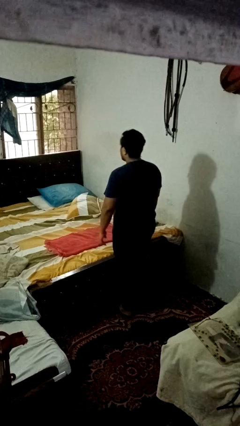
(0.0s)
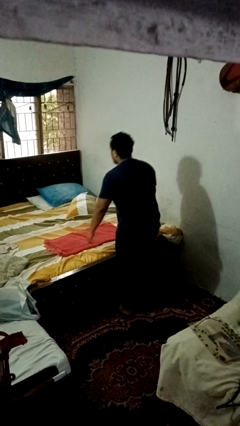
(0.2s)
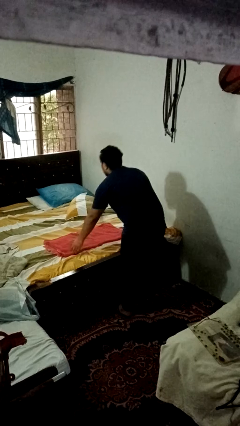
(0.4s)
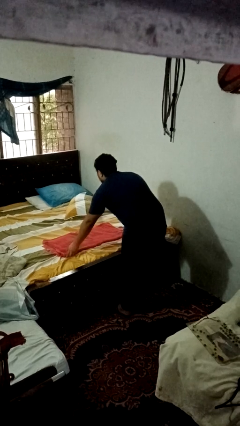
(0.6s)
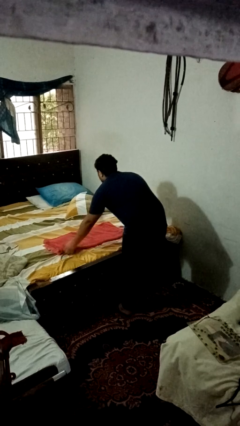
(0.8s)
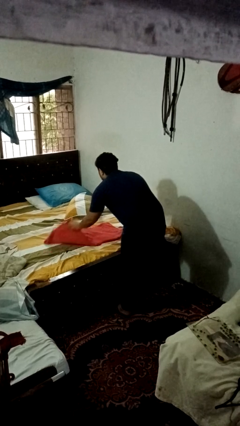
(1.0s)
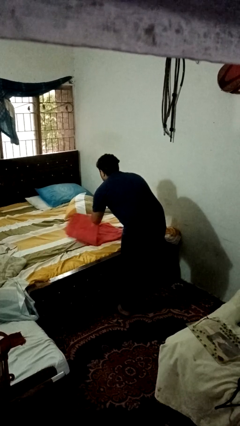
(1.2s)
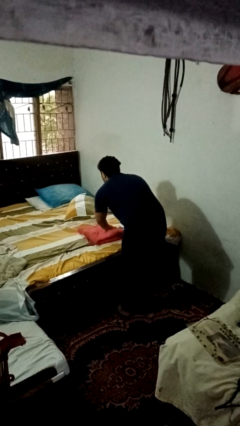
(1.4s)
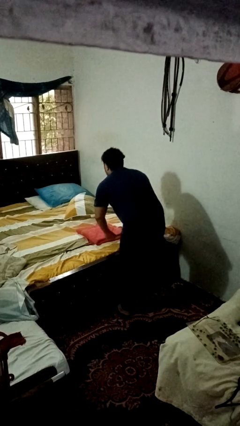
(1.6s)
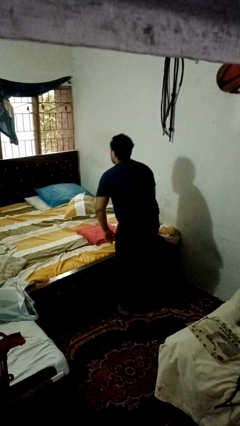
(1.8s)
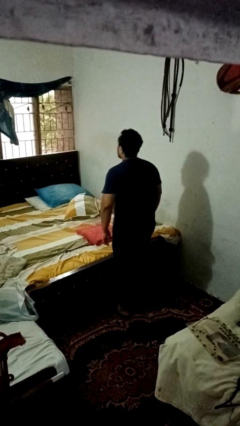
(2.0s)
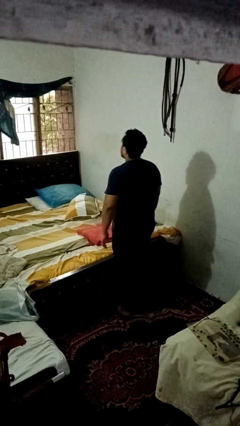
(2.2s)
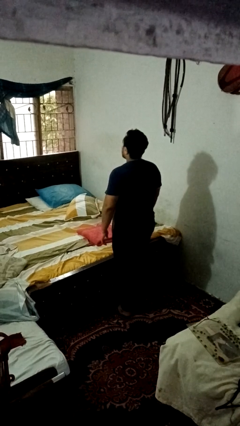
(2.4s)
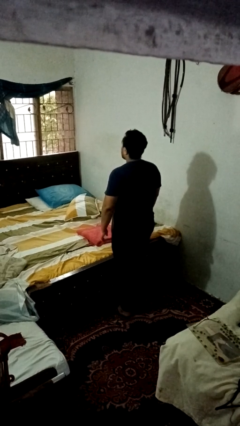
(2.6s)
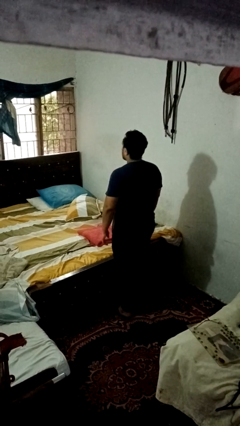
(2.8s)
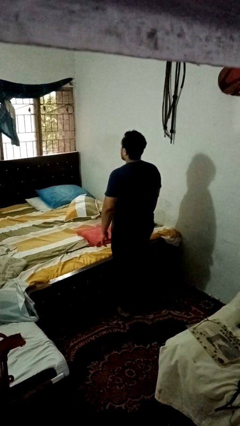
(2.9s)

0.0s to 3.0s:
person folds towel

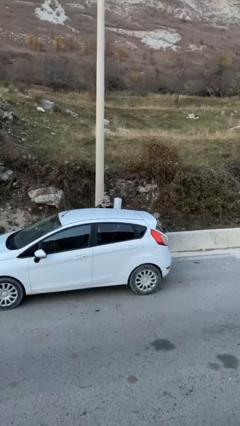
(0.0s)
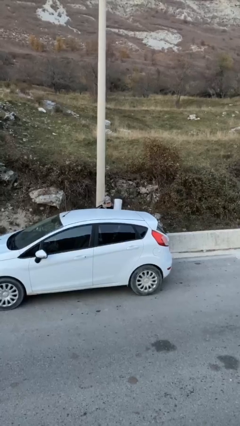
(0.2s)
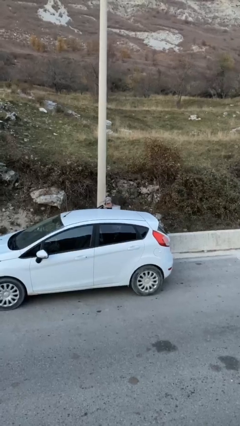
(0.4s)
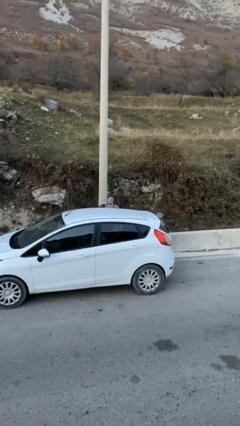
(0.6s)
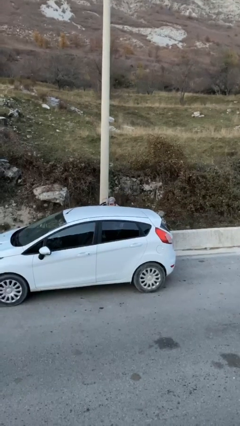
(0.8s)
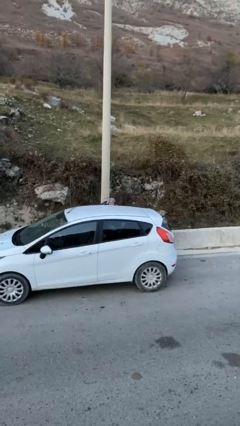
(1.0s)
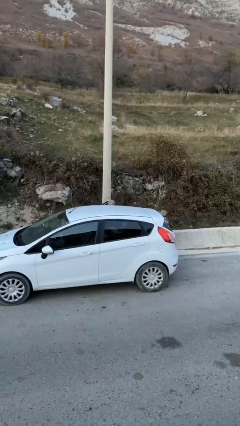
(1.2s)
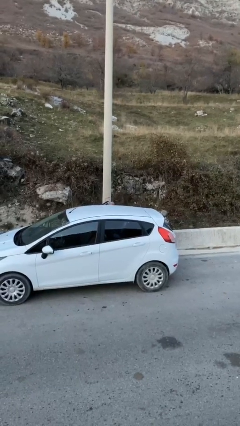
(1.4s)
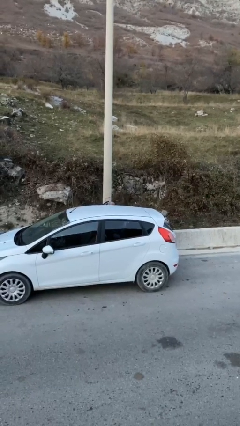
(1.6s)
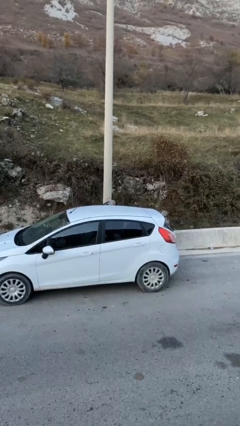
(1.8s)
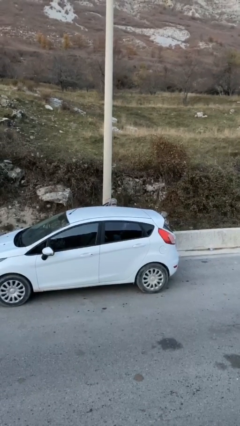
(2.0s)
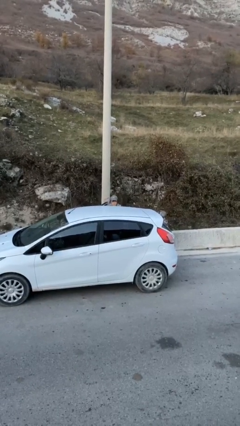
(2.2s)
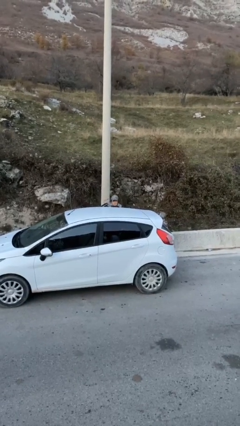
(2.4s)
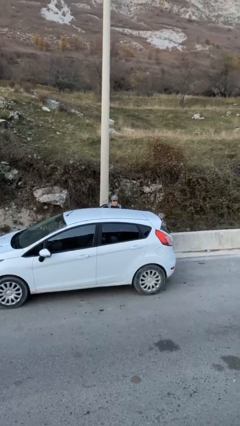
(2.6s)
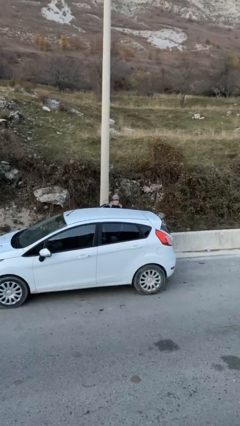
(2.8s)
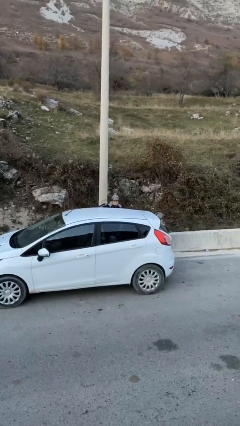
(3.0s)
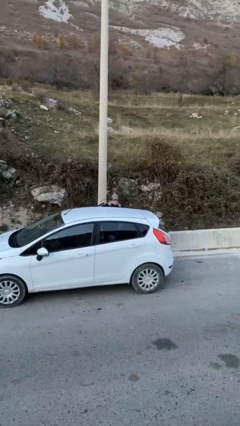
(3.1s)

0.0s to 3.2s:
person loads car

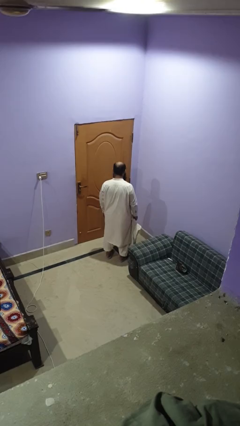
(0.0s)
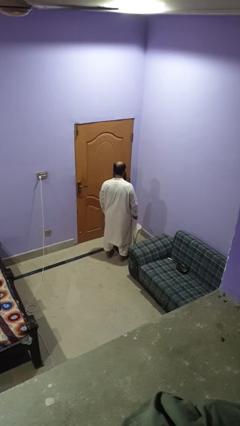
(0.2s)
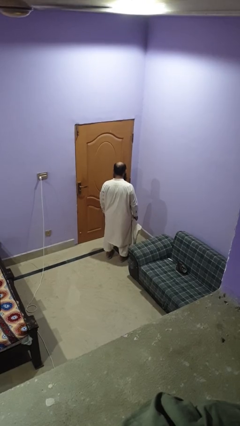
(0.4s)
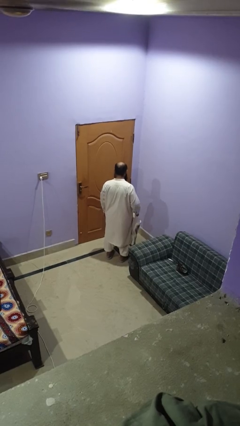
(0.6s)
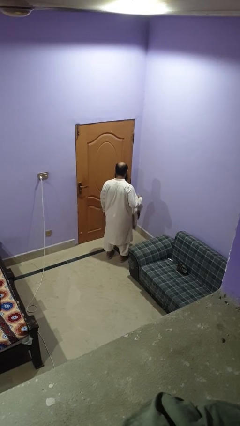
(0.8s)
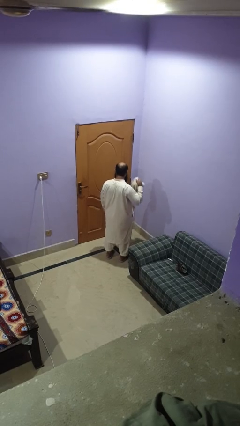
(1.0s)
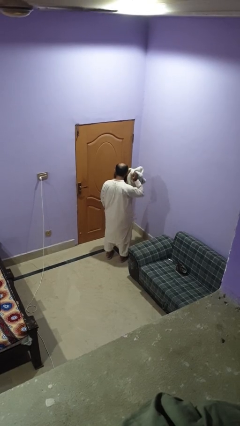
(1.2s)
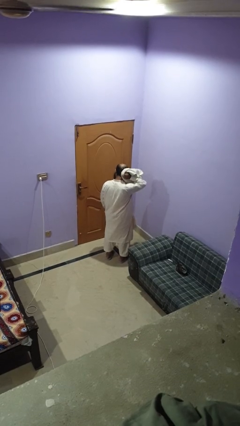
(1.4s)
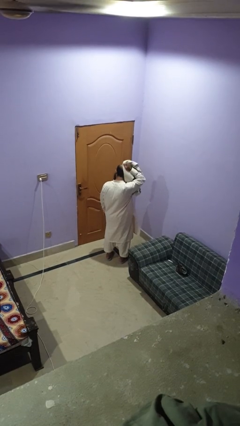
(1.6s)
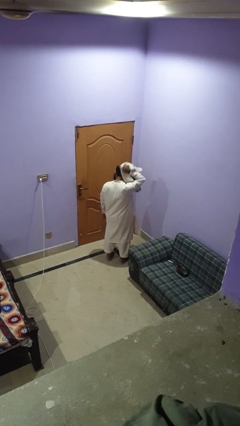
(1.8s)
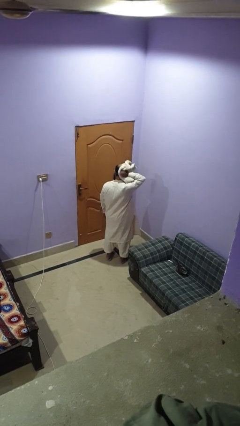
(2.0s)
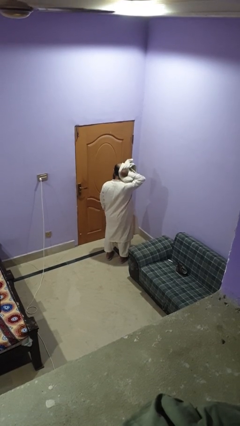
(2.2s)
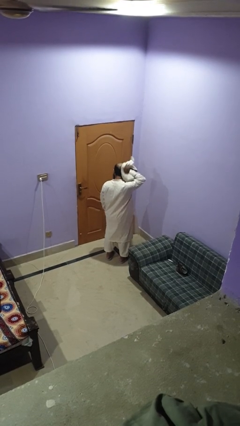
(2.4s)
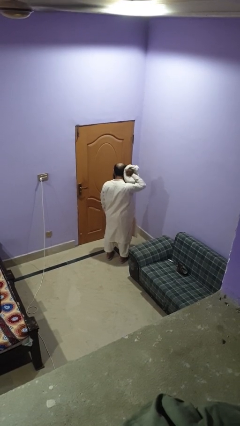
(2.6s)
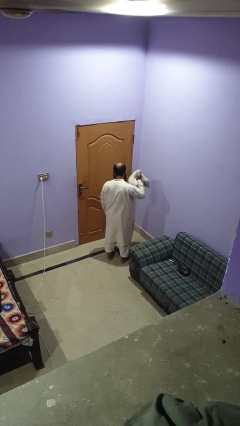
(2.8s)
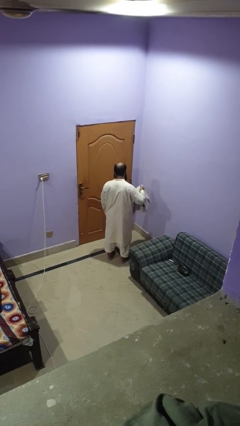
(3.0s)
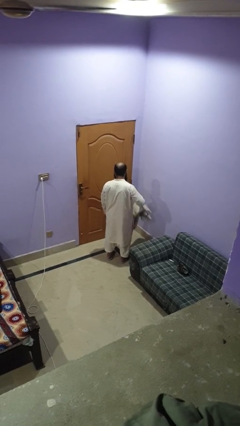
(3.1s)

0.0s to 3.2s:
person dries hair with towel

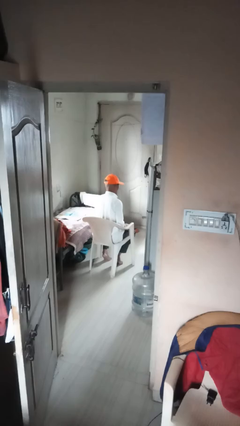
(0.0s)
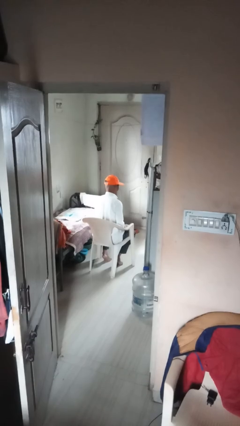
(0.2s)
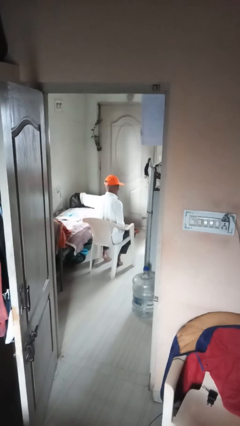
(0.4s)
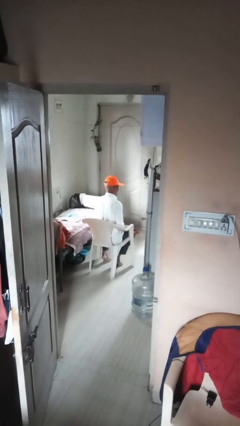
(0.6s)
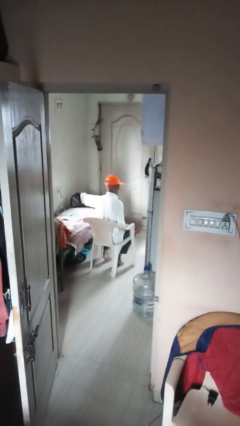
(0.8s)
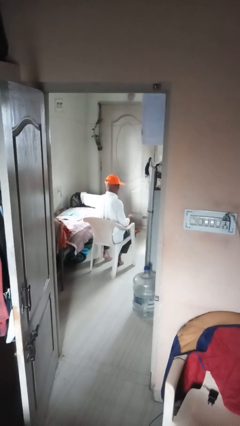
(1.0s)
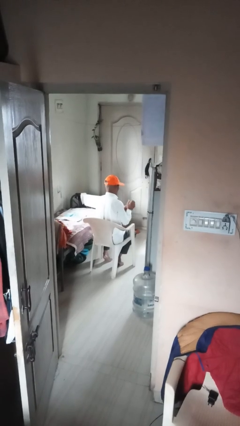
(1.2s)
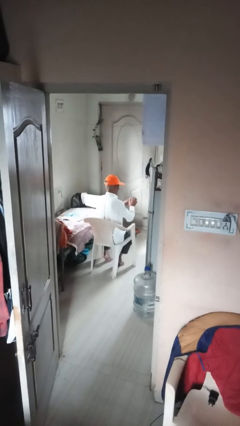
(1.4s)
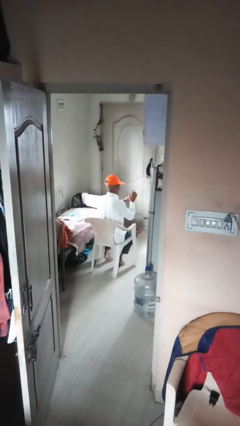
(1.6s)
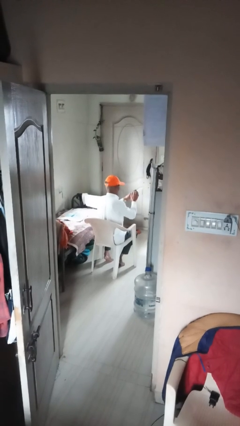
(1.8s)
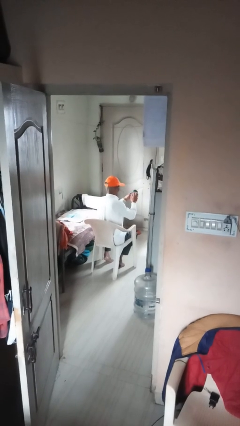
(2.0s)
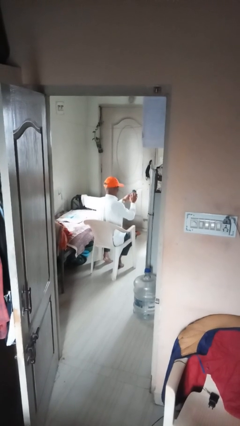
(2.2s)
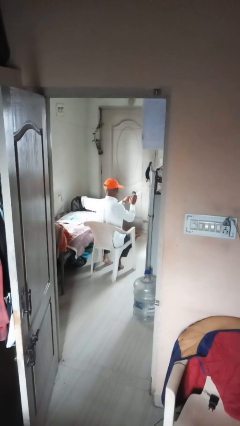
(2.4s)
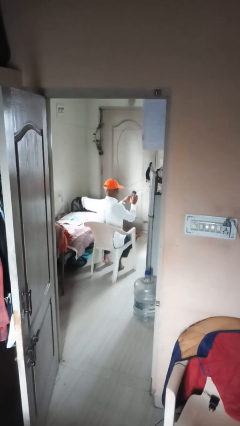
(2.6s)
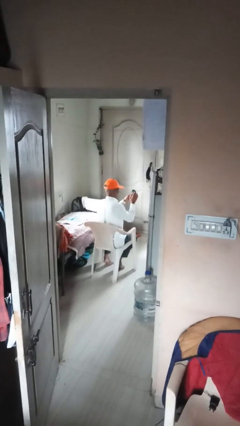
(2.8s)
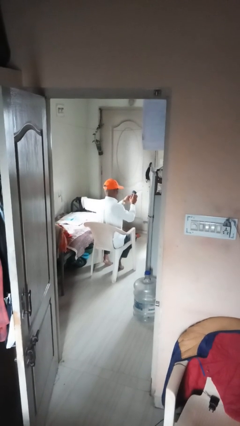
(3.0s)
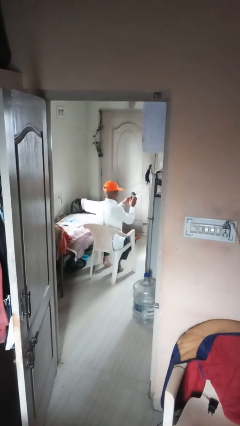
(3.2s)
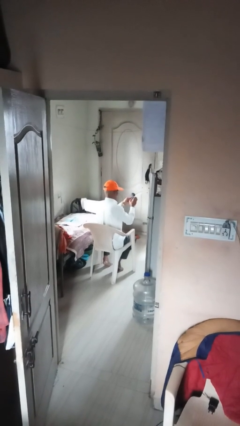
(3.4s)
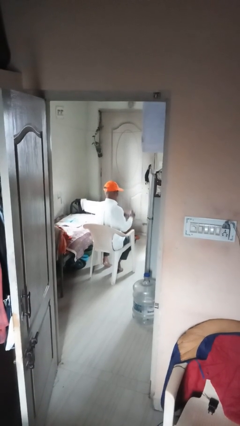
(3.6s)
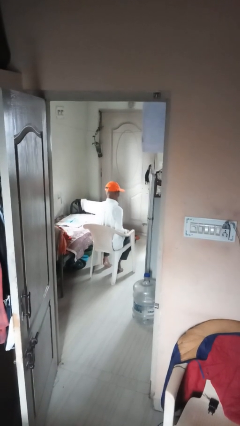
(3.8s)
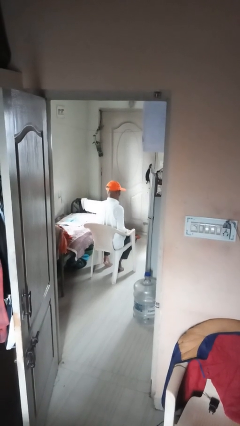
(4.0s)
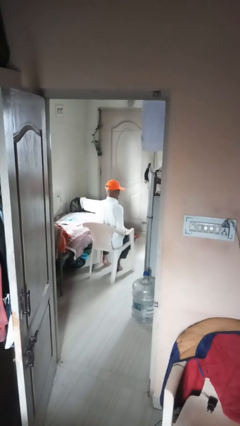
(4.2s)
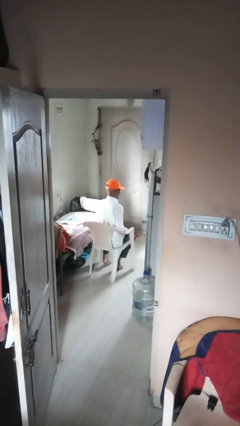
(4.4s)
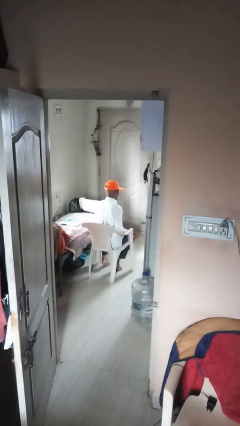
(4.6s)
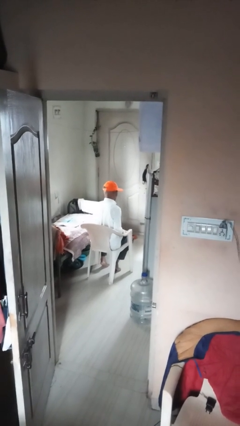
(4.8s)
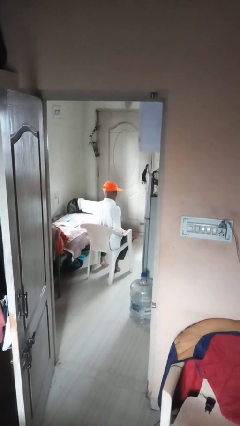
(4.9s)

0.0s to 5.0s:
person taps object with finger

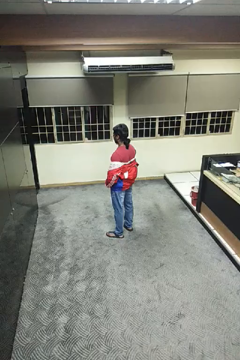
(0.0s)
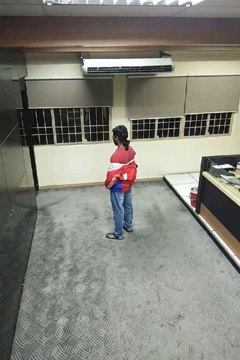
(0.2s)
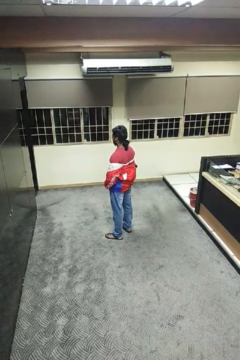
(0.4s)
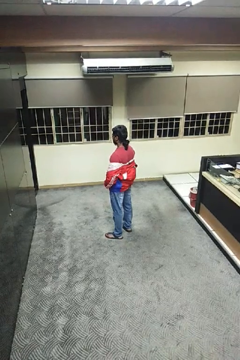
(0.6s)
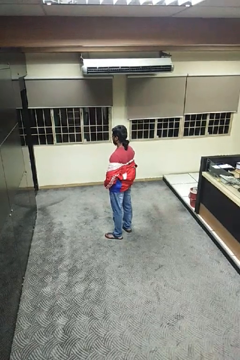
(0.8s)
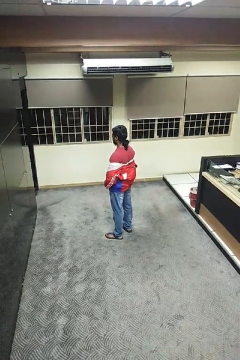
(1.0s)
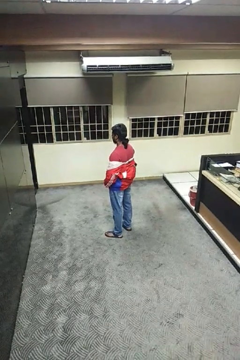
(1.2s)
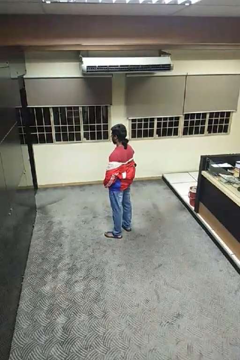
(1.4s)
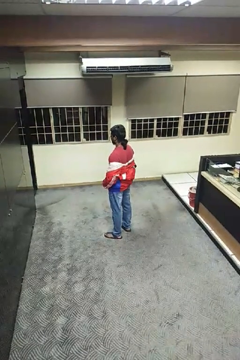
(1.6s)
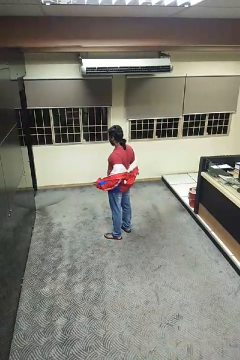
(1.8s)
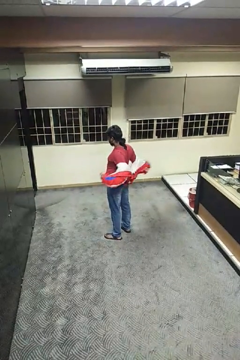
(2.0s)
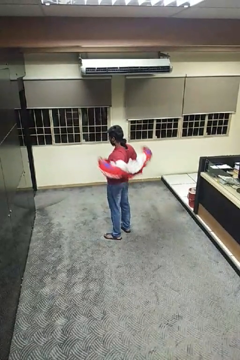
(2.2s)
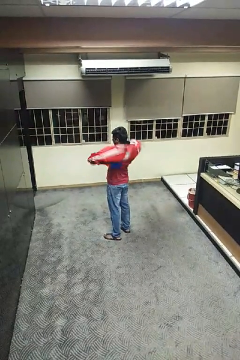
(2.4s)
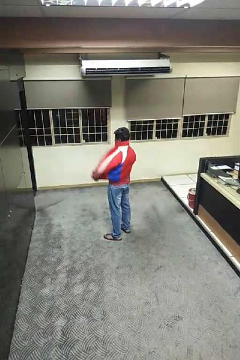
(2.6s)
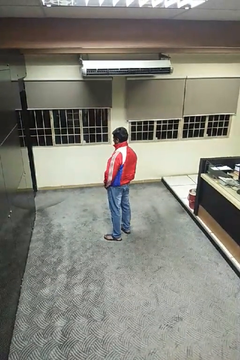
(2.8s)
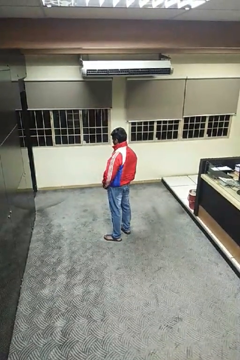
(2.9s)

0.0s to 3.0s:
person puts on jacket

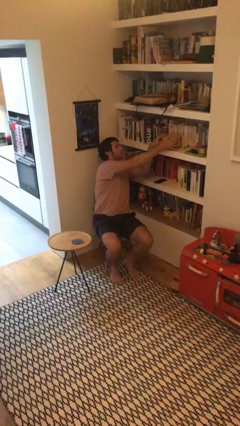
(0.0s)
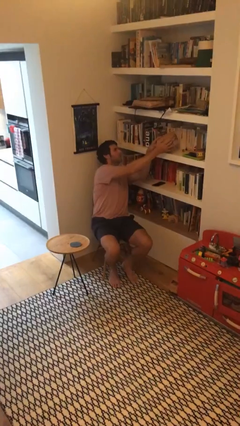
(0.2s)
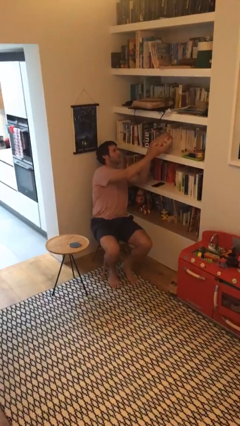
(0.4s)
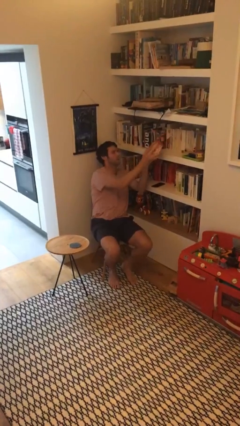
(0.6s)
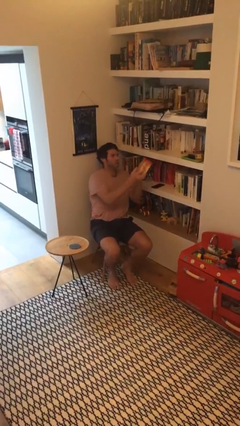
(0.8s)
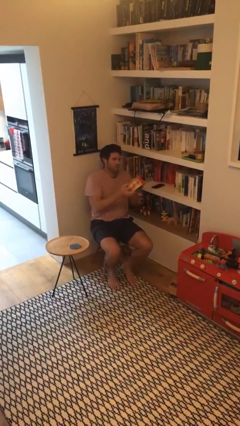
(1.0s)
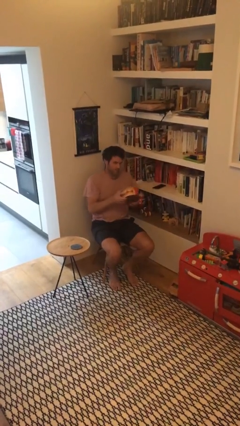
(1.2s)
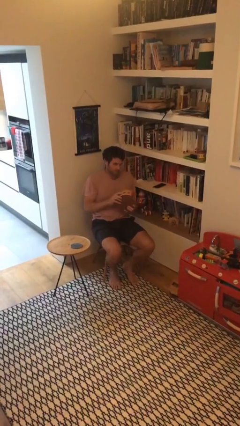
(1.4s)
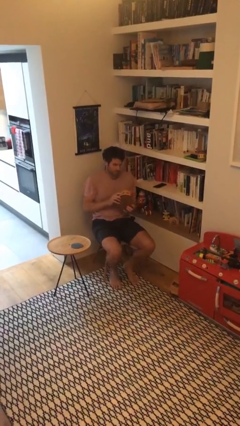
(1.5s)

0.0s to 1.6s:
person picks up object from shelf
